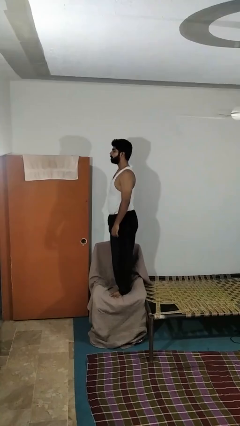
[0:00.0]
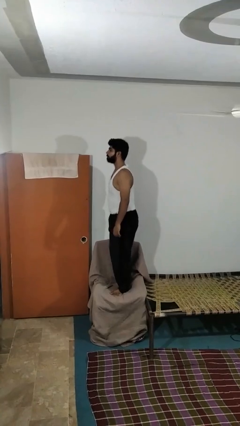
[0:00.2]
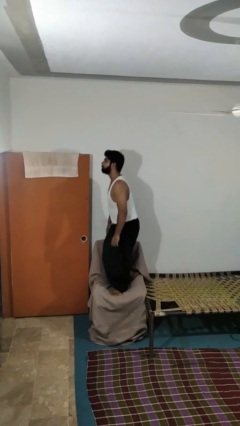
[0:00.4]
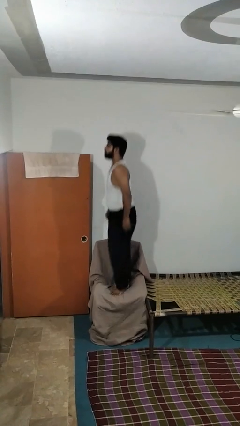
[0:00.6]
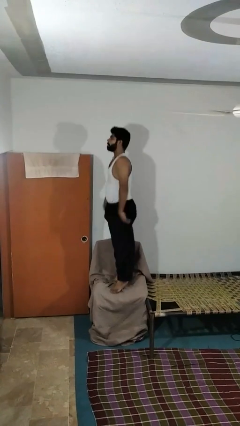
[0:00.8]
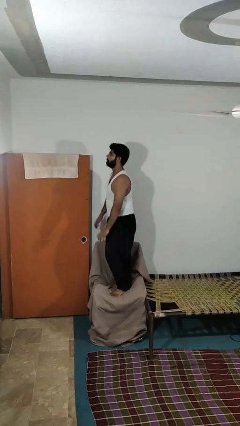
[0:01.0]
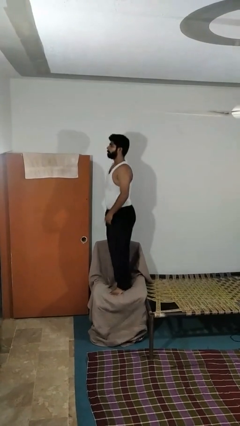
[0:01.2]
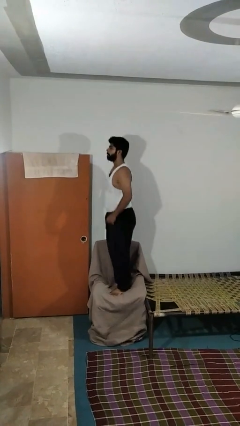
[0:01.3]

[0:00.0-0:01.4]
person jumps on couch

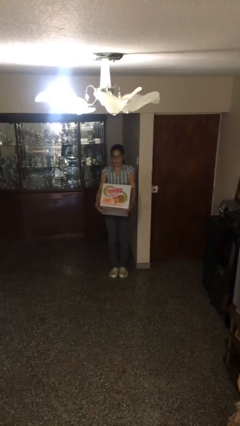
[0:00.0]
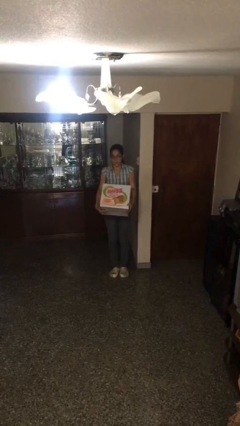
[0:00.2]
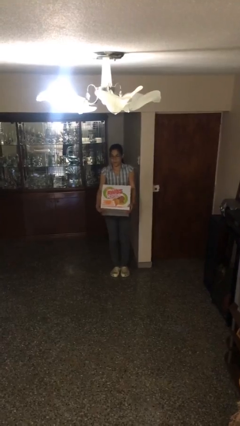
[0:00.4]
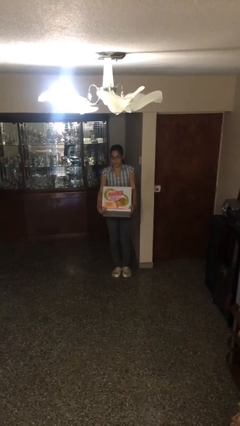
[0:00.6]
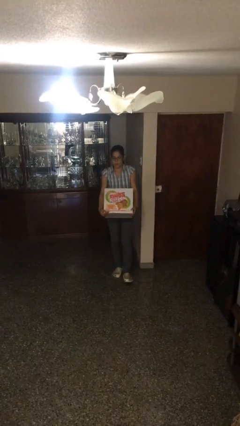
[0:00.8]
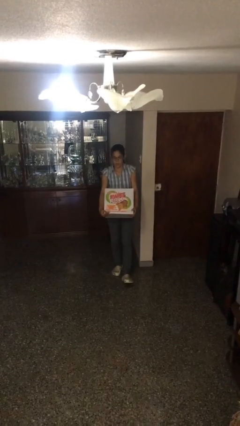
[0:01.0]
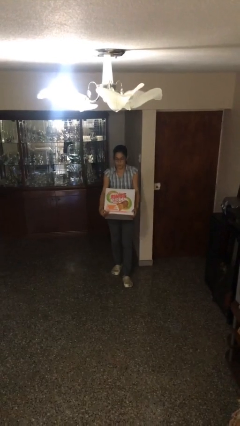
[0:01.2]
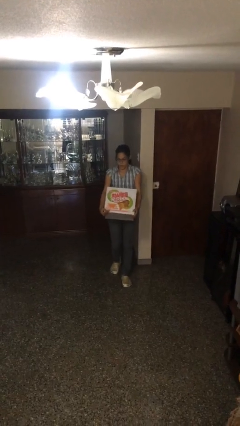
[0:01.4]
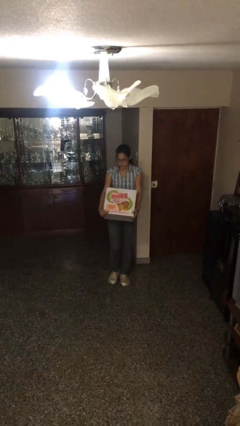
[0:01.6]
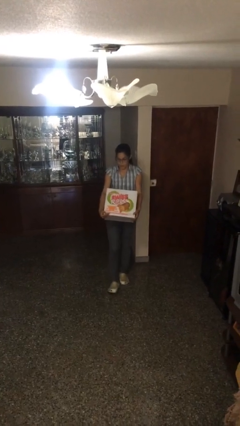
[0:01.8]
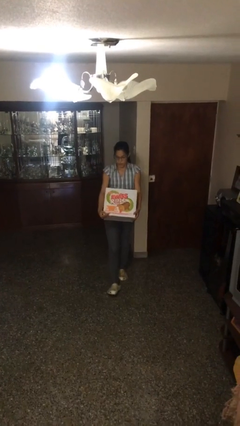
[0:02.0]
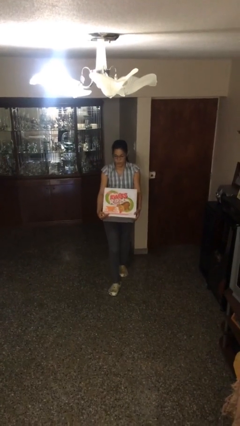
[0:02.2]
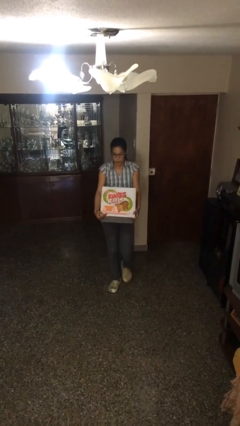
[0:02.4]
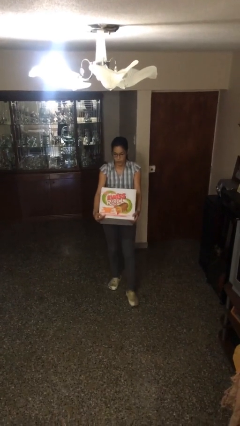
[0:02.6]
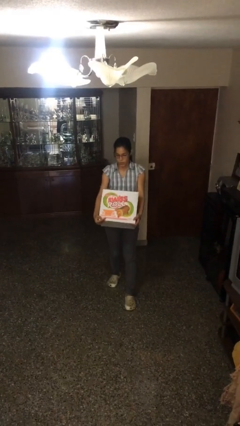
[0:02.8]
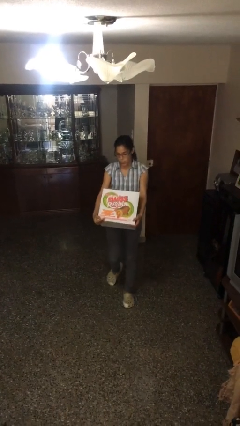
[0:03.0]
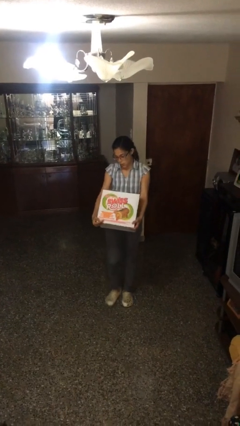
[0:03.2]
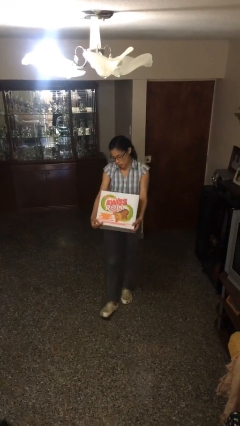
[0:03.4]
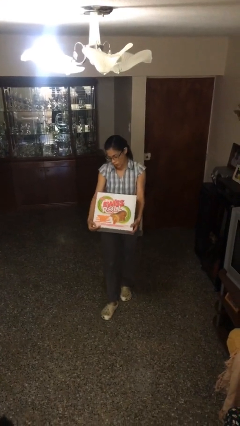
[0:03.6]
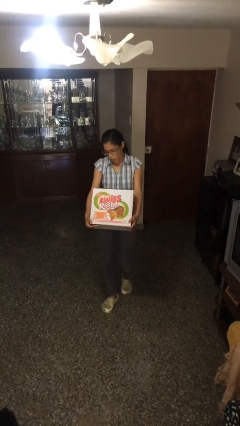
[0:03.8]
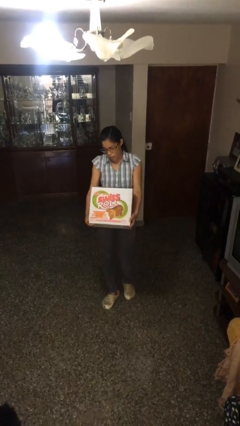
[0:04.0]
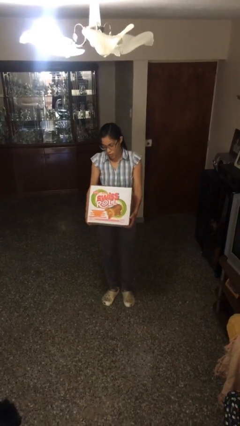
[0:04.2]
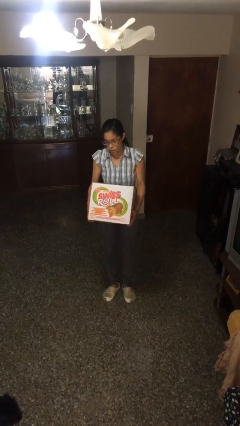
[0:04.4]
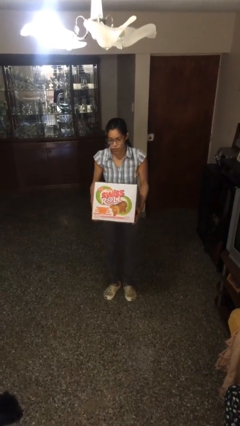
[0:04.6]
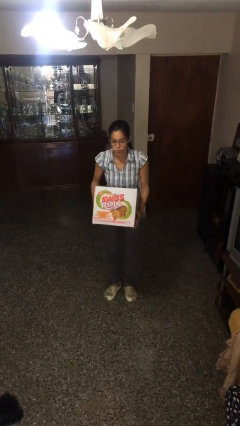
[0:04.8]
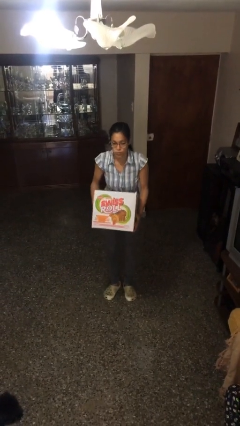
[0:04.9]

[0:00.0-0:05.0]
person carries heavy object

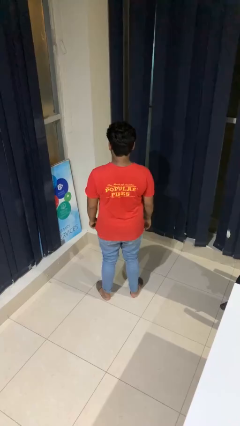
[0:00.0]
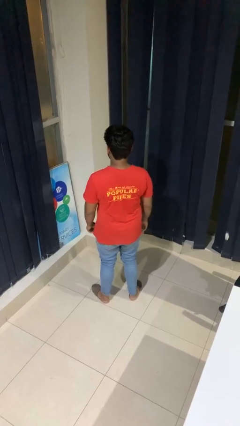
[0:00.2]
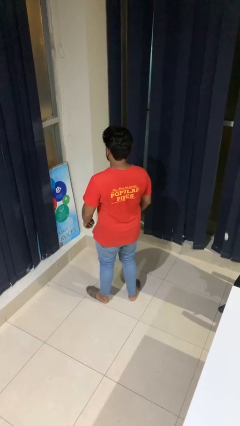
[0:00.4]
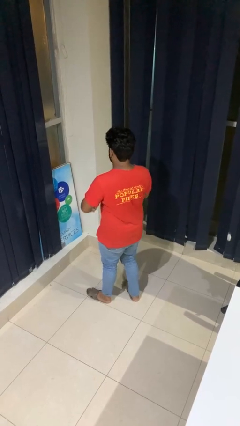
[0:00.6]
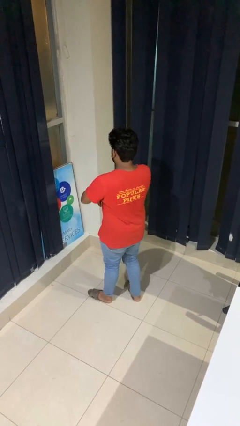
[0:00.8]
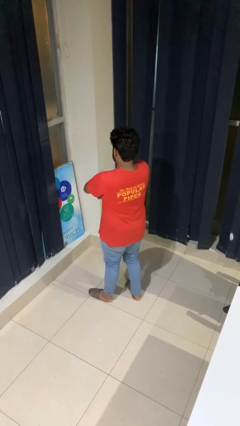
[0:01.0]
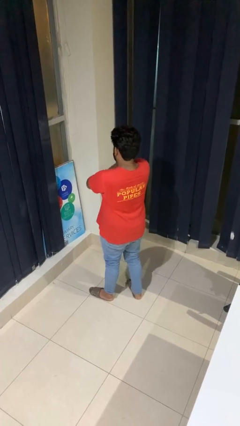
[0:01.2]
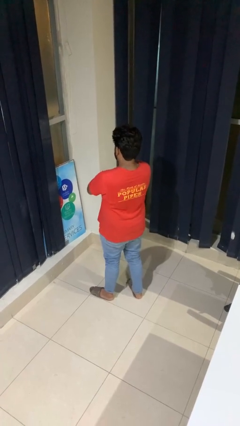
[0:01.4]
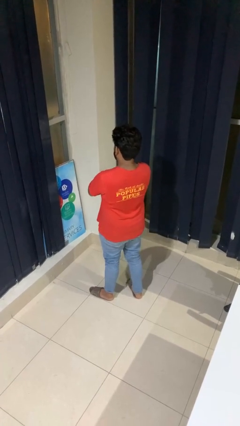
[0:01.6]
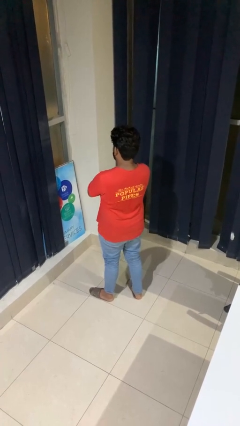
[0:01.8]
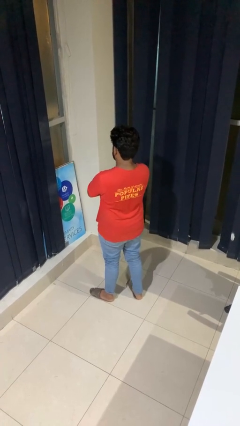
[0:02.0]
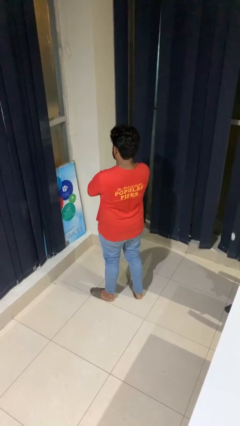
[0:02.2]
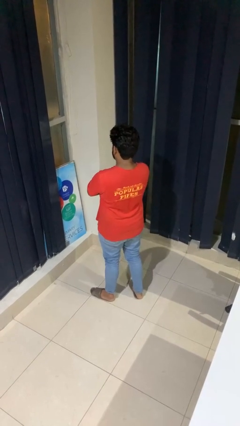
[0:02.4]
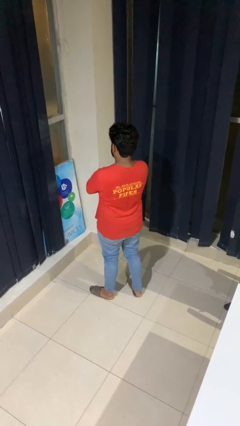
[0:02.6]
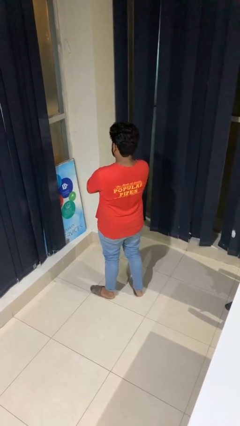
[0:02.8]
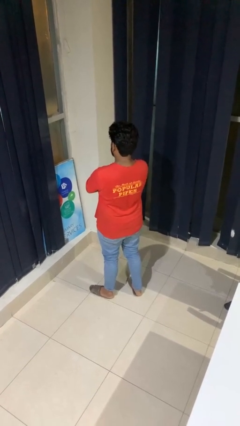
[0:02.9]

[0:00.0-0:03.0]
person crosses arms

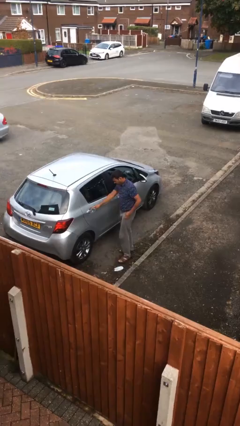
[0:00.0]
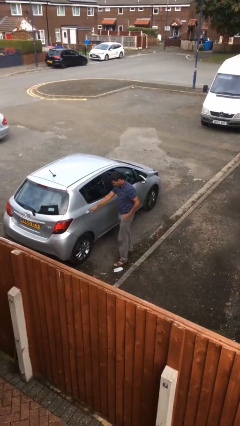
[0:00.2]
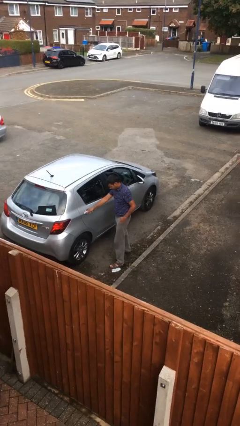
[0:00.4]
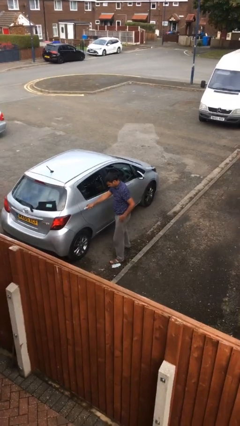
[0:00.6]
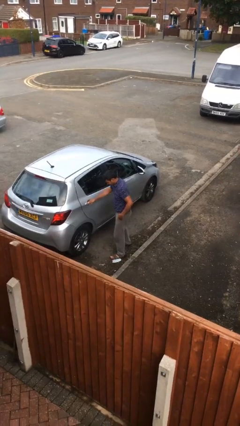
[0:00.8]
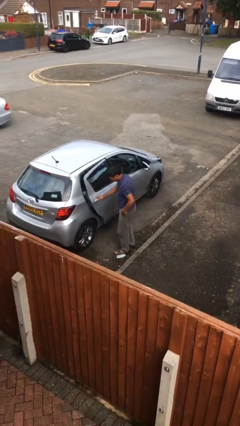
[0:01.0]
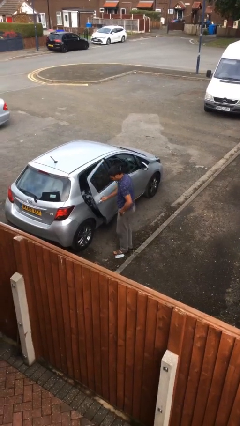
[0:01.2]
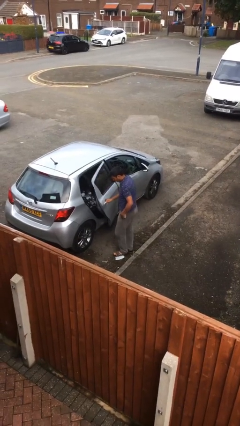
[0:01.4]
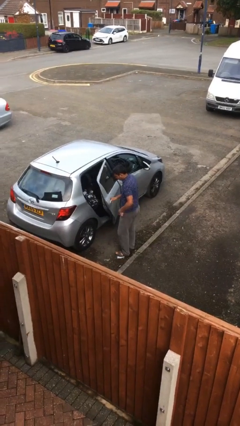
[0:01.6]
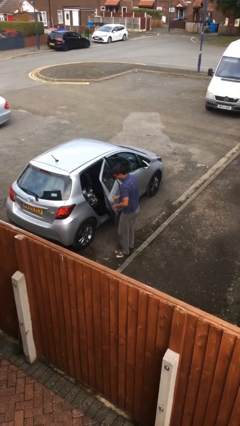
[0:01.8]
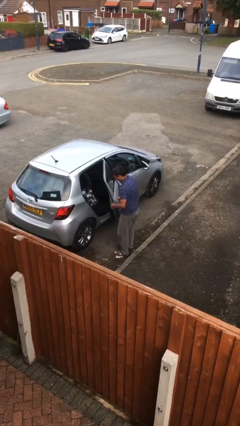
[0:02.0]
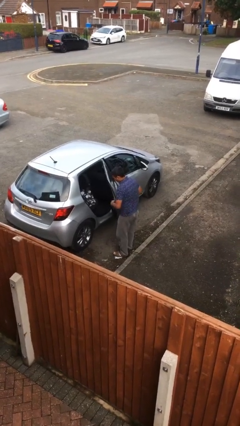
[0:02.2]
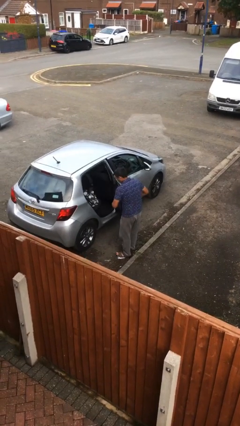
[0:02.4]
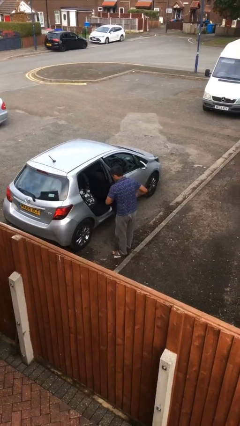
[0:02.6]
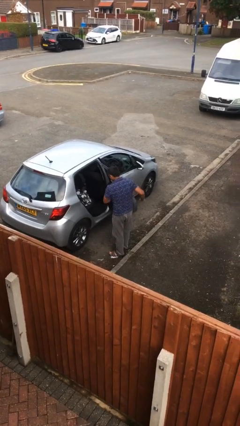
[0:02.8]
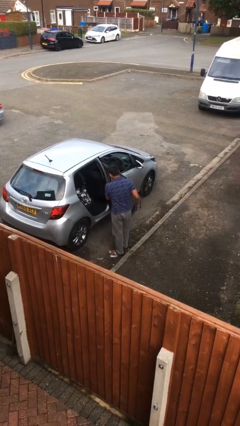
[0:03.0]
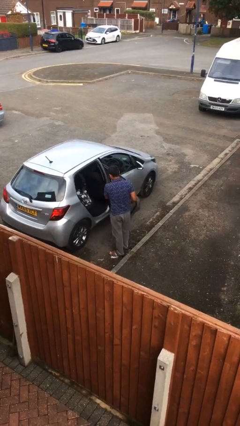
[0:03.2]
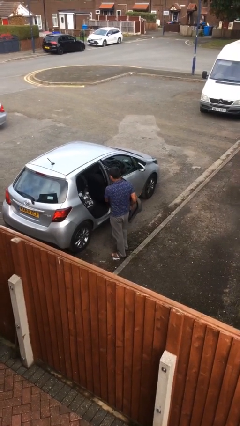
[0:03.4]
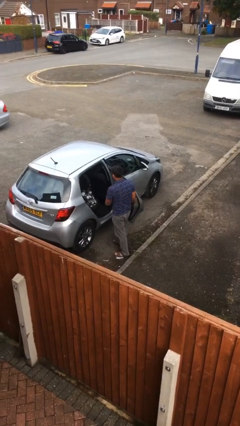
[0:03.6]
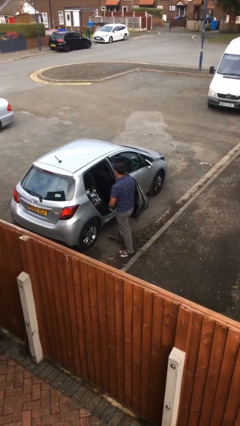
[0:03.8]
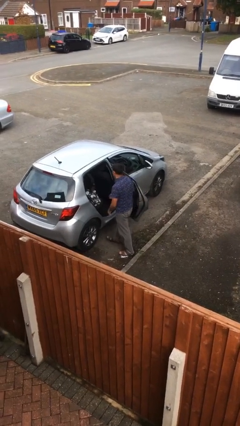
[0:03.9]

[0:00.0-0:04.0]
person opens car door

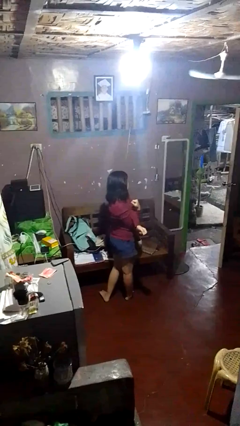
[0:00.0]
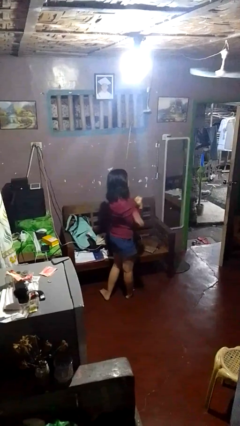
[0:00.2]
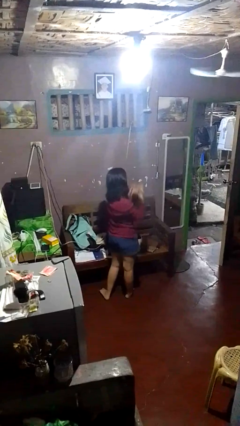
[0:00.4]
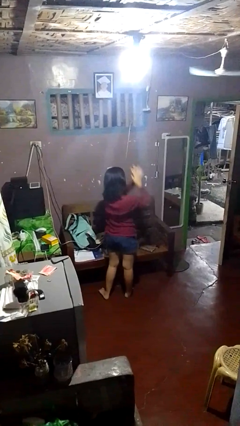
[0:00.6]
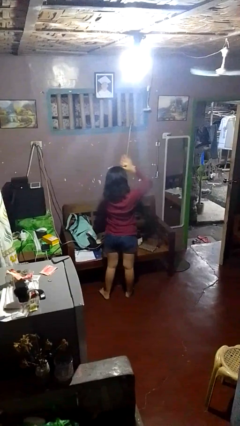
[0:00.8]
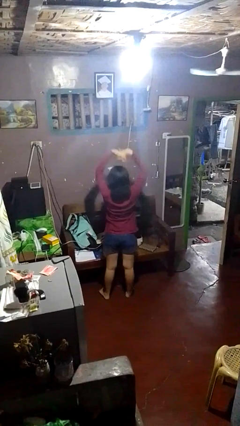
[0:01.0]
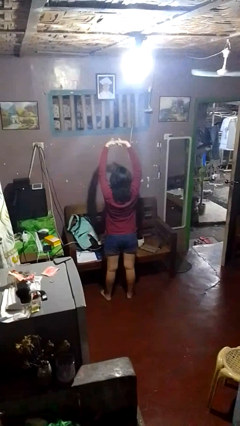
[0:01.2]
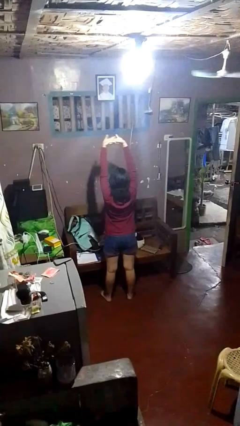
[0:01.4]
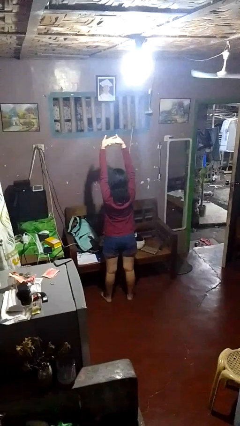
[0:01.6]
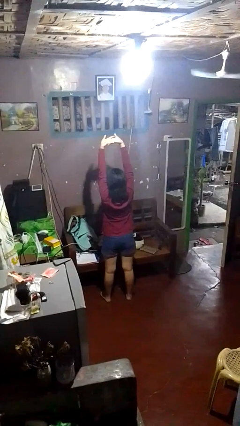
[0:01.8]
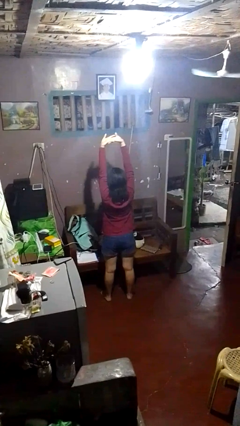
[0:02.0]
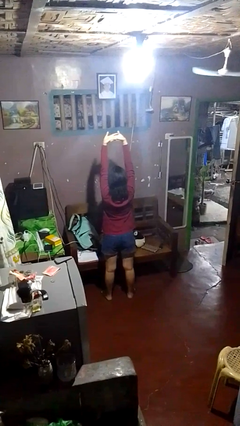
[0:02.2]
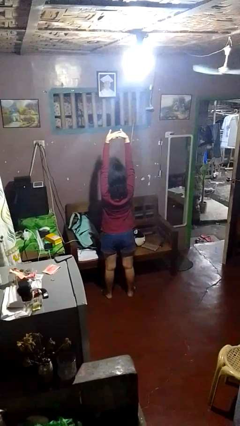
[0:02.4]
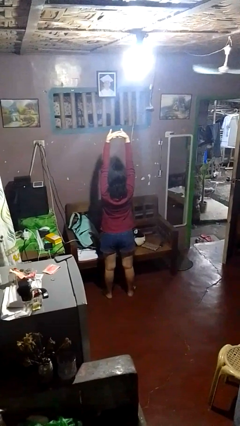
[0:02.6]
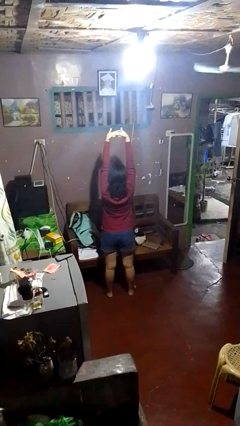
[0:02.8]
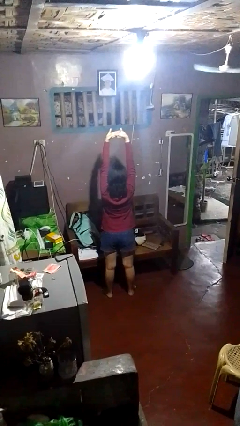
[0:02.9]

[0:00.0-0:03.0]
person stretches arms over head

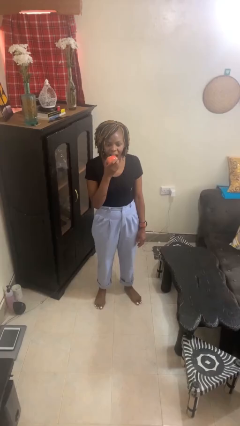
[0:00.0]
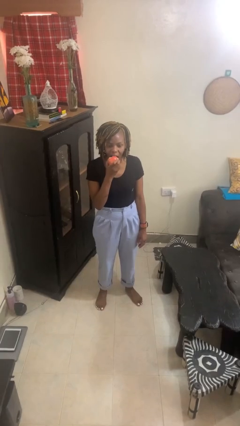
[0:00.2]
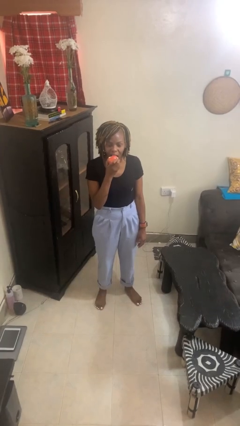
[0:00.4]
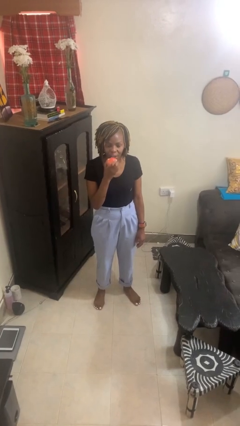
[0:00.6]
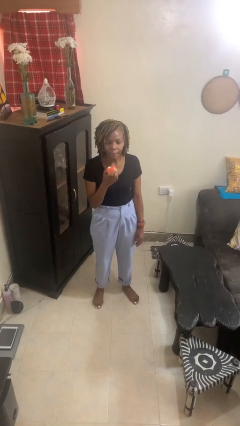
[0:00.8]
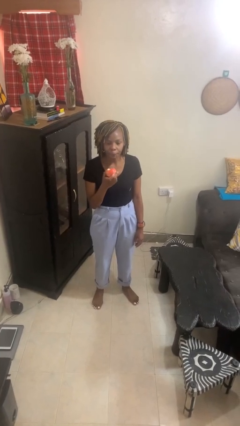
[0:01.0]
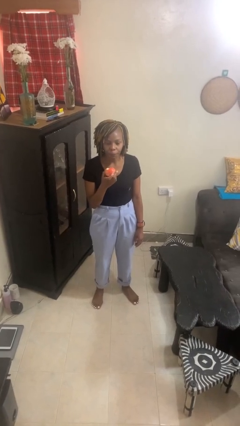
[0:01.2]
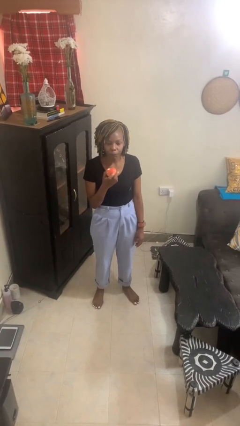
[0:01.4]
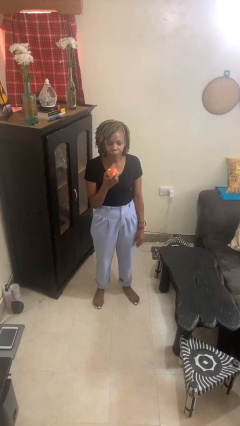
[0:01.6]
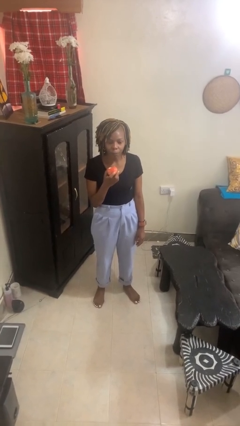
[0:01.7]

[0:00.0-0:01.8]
person eats apple
